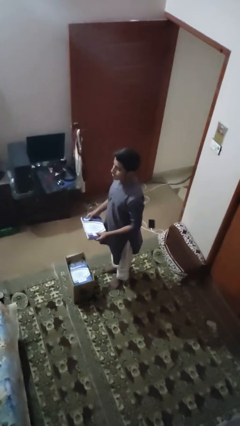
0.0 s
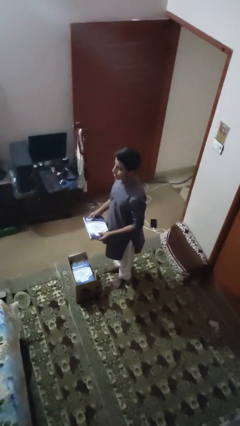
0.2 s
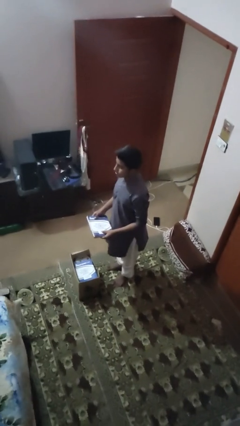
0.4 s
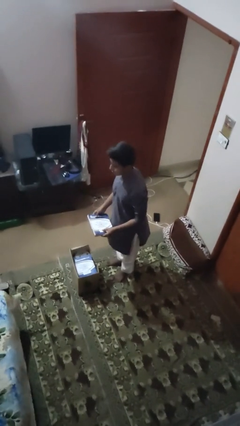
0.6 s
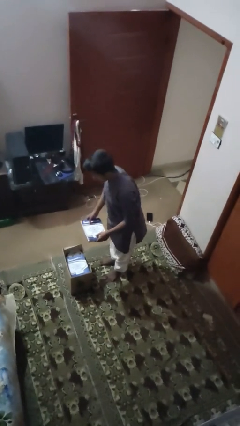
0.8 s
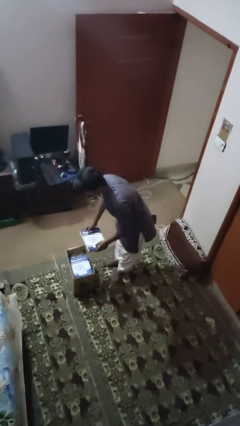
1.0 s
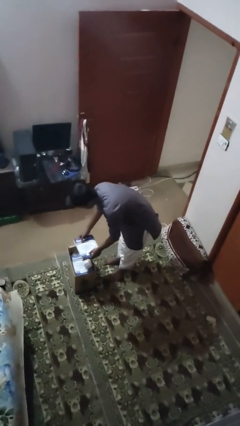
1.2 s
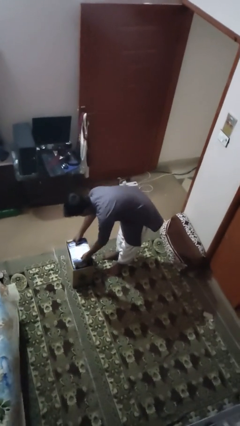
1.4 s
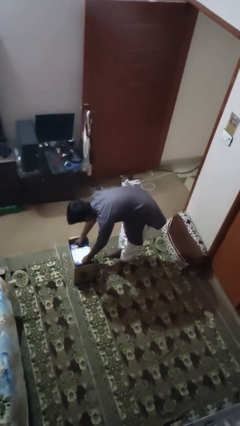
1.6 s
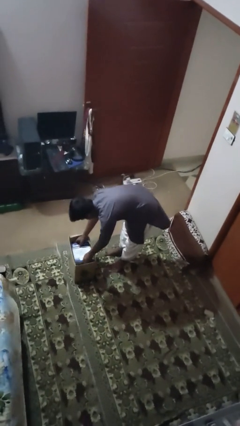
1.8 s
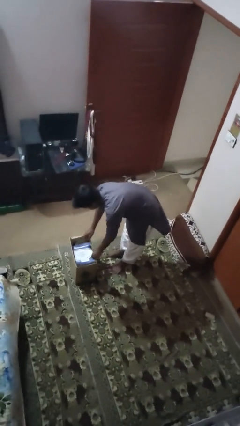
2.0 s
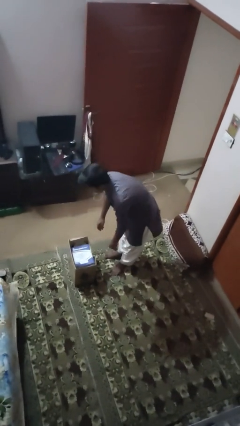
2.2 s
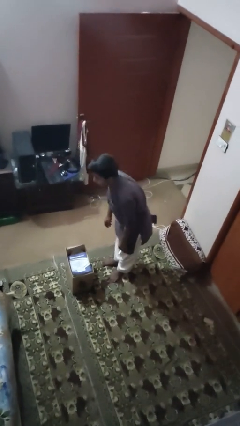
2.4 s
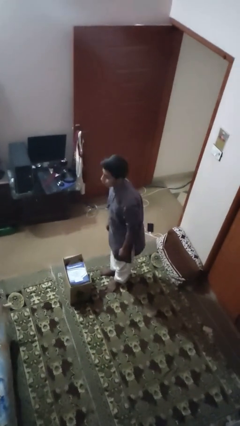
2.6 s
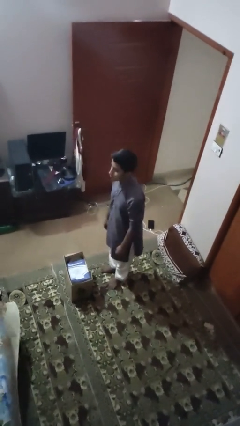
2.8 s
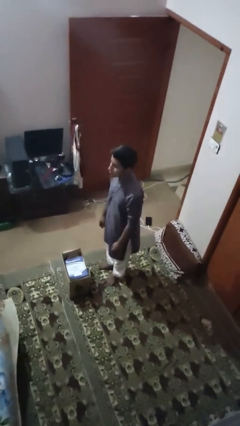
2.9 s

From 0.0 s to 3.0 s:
person puts object into box

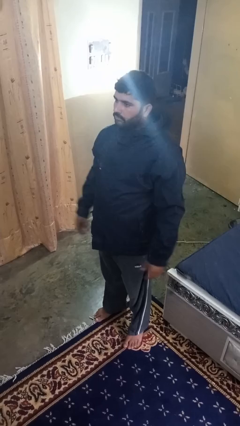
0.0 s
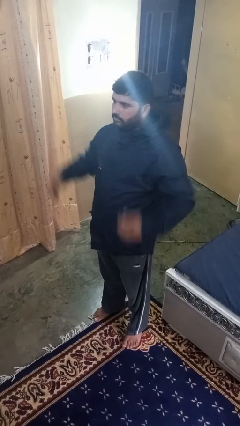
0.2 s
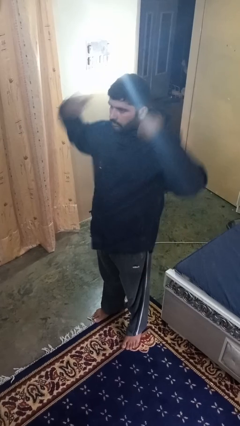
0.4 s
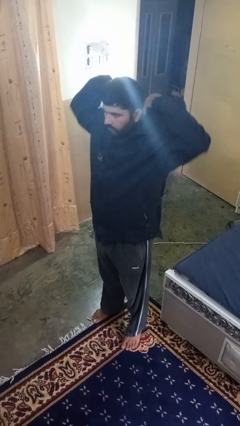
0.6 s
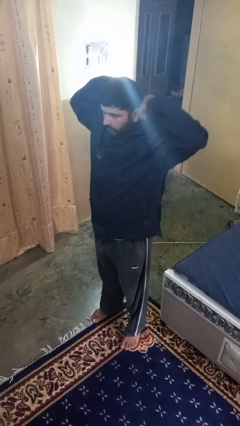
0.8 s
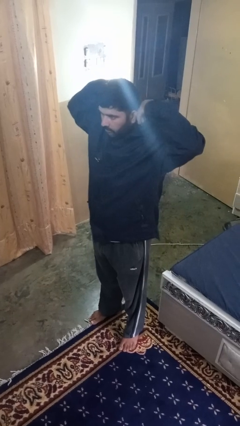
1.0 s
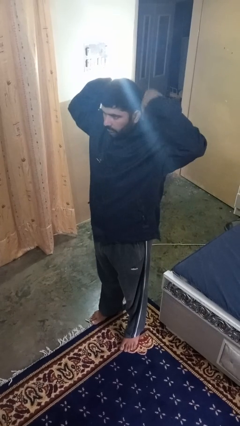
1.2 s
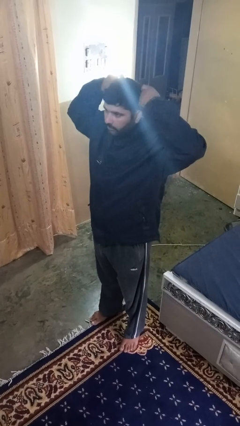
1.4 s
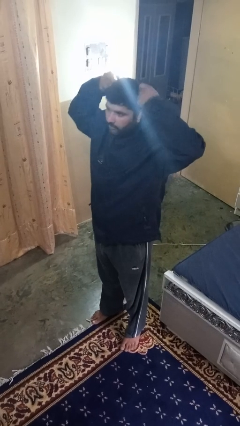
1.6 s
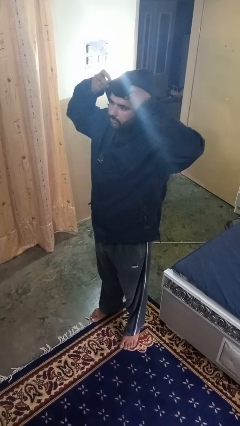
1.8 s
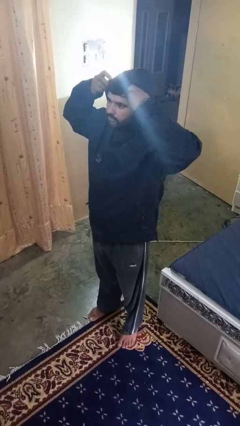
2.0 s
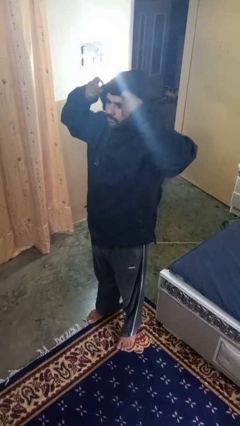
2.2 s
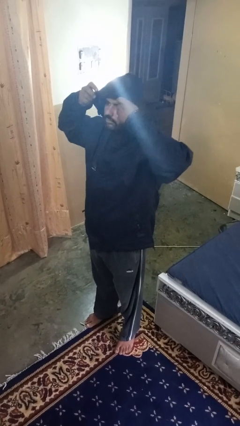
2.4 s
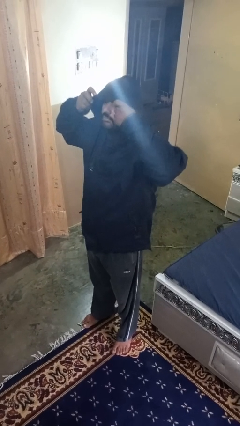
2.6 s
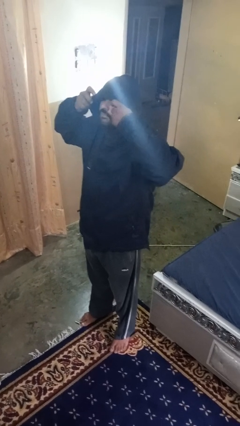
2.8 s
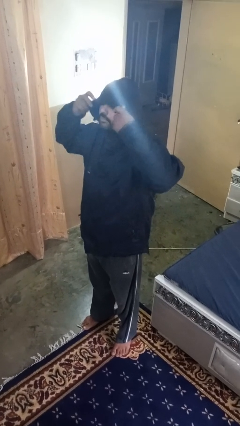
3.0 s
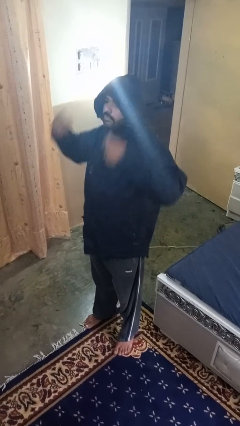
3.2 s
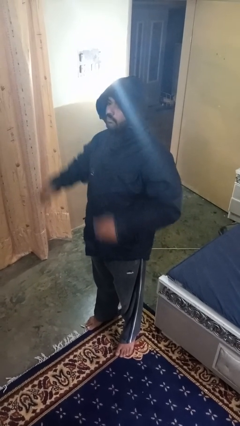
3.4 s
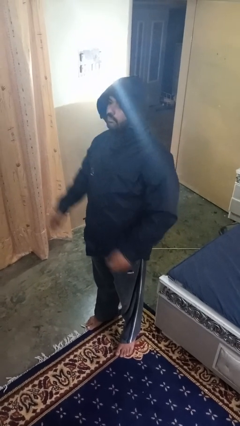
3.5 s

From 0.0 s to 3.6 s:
person puts on hoodie

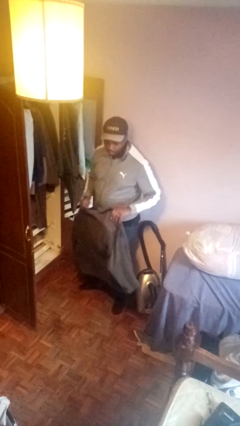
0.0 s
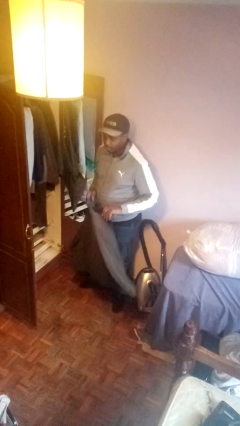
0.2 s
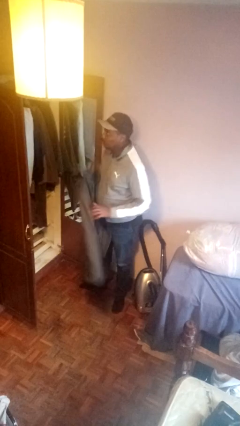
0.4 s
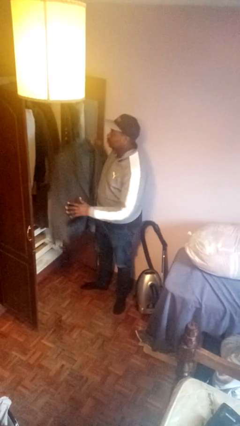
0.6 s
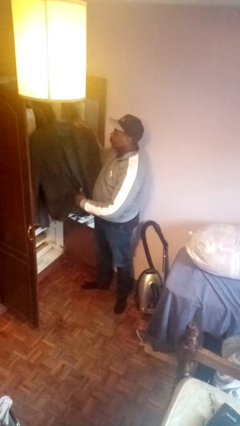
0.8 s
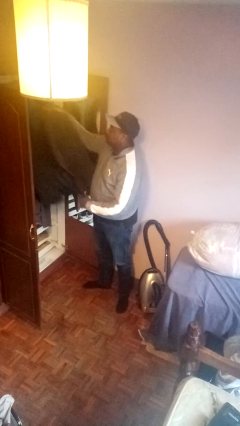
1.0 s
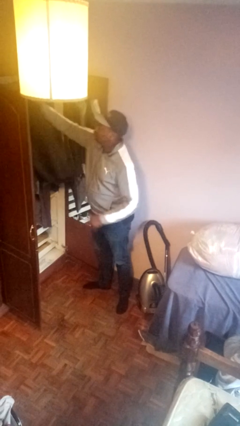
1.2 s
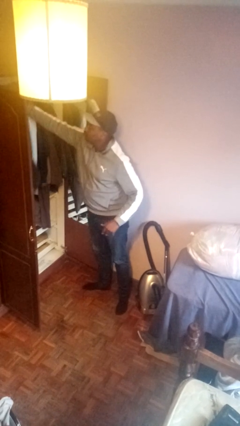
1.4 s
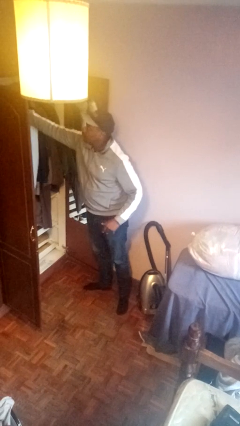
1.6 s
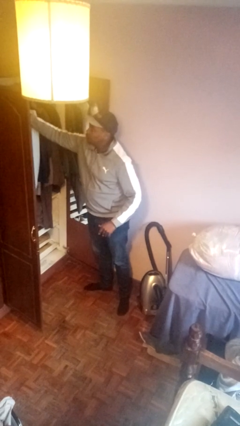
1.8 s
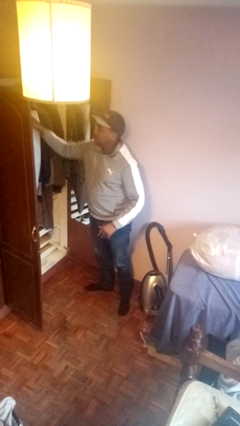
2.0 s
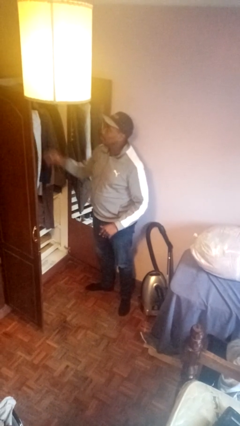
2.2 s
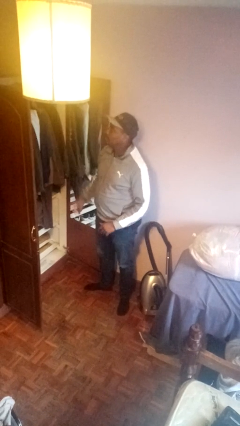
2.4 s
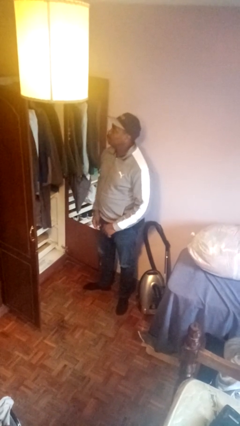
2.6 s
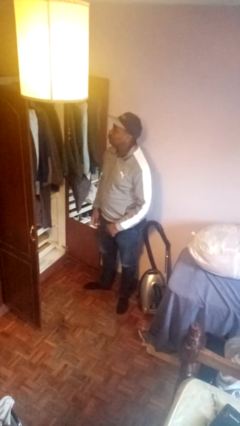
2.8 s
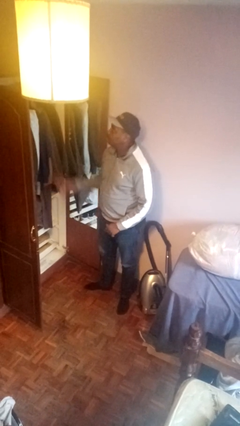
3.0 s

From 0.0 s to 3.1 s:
person puts clothes into closet

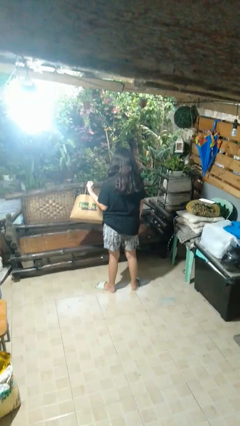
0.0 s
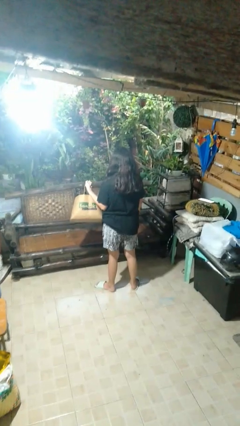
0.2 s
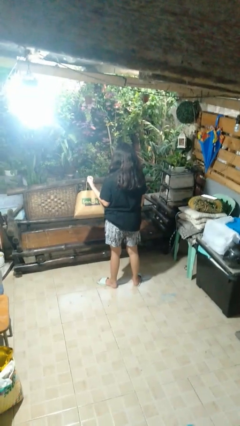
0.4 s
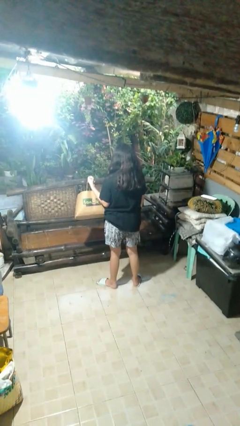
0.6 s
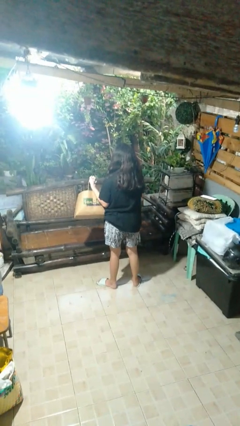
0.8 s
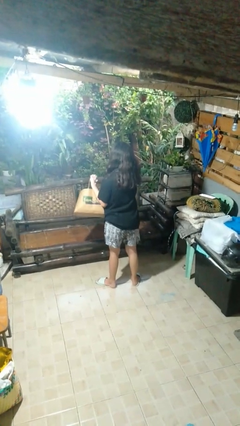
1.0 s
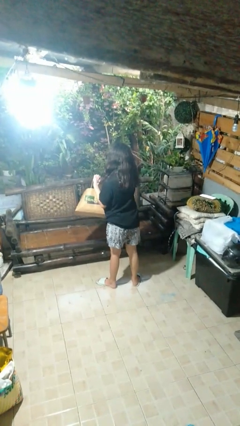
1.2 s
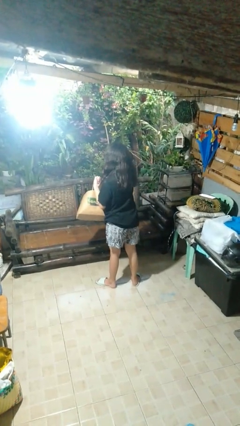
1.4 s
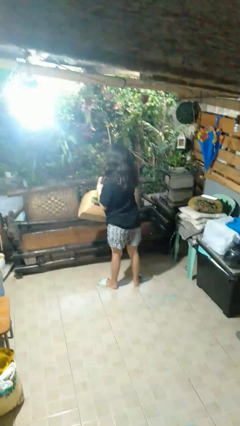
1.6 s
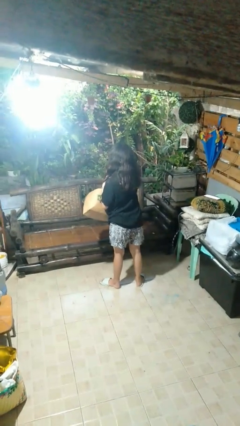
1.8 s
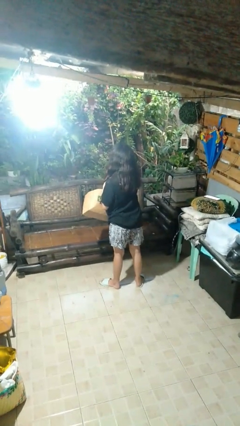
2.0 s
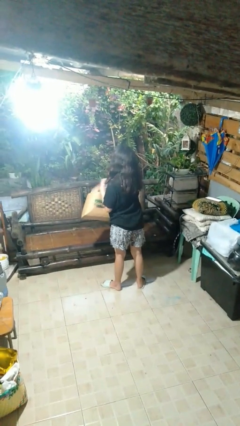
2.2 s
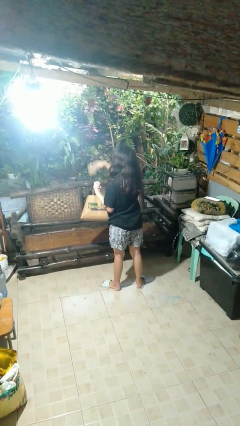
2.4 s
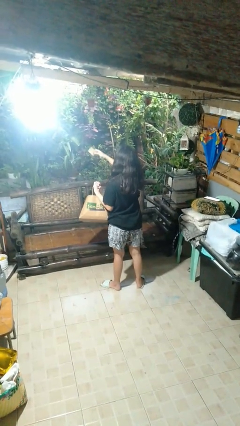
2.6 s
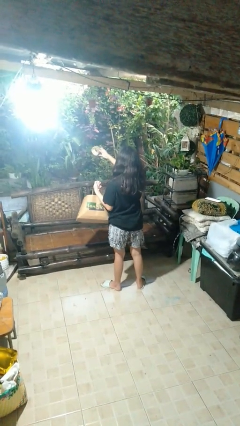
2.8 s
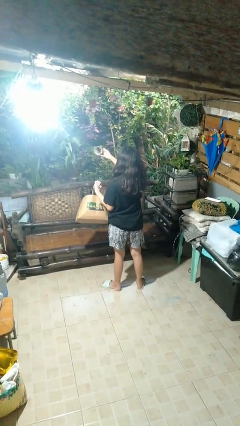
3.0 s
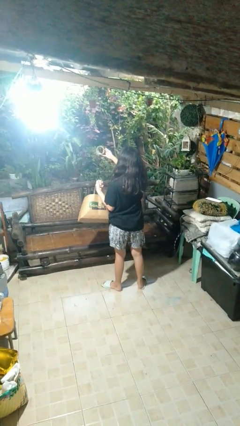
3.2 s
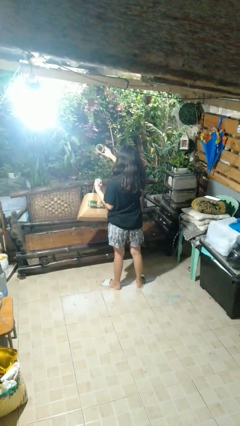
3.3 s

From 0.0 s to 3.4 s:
person takes object from bag

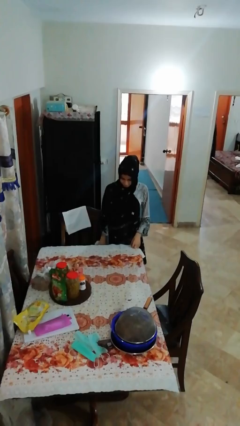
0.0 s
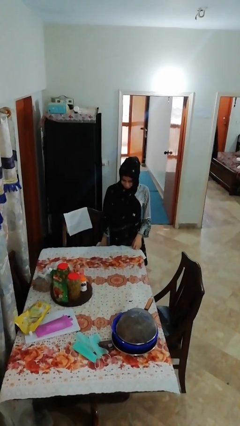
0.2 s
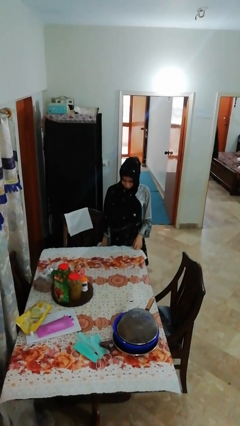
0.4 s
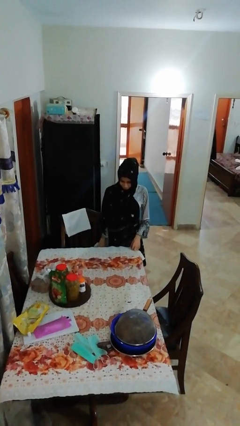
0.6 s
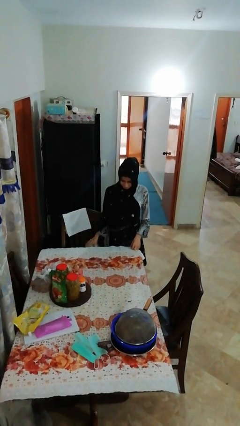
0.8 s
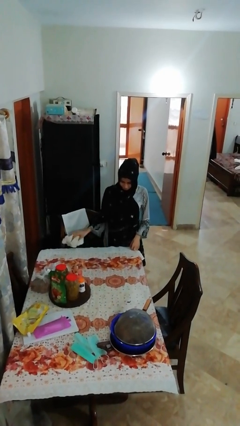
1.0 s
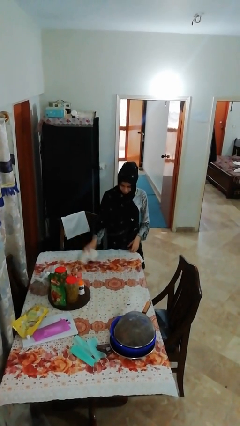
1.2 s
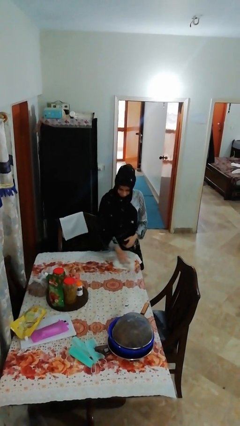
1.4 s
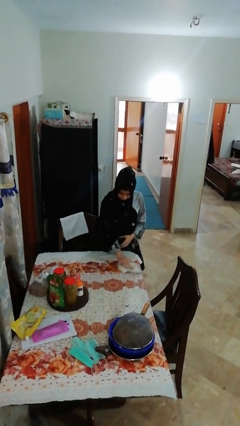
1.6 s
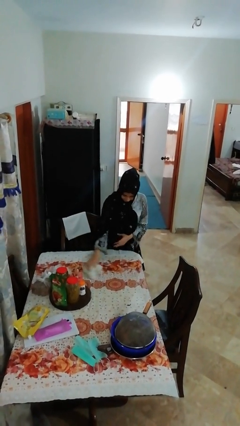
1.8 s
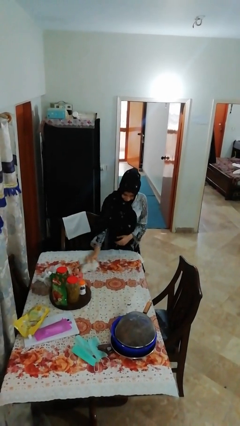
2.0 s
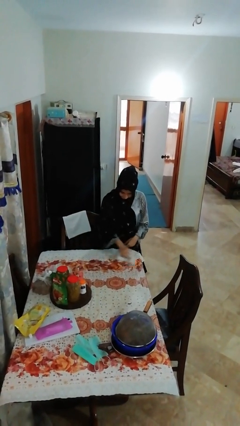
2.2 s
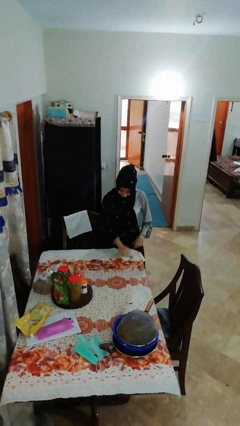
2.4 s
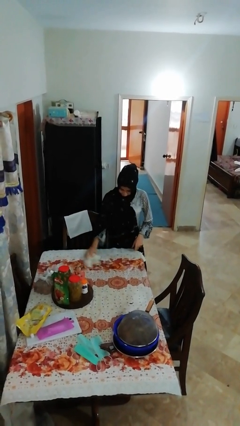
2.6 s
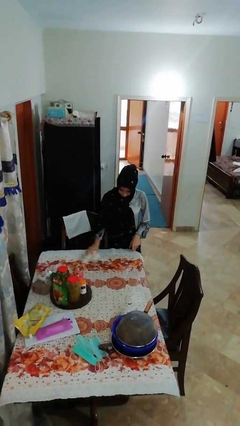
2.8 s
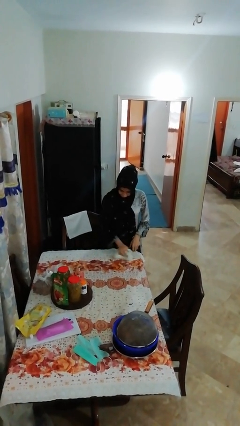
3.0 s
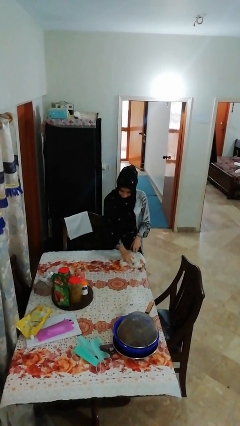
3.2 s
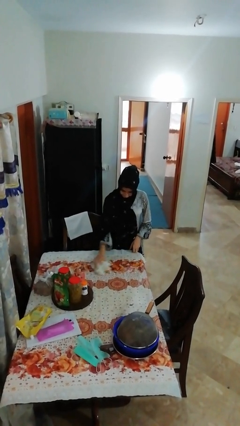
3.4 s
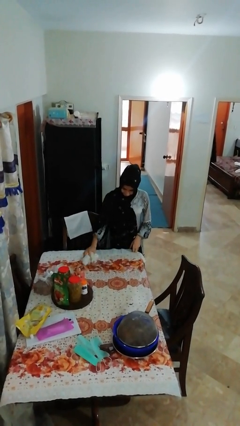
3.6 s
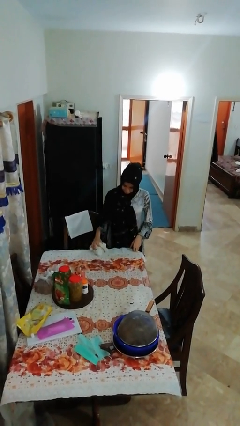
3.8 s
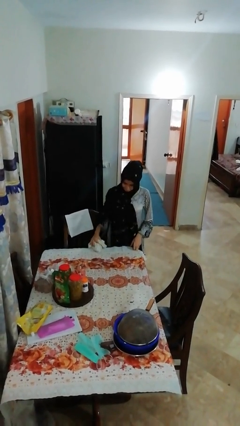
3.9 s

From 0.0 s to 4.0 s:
person cleans table with rag

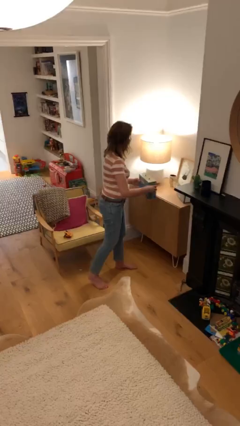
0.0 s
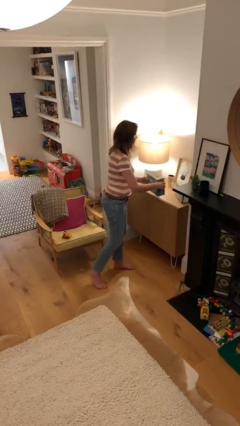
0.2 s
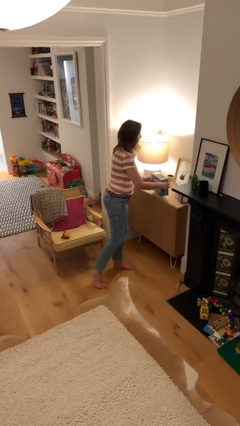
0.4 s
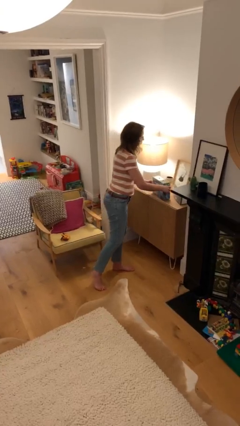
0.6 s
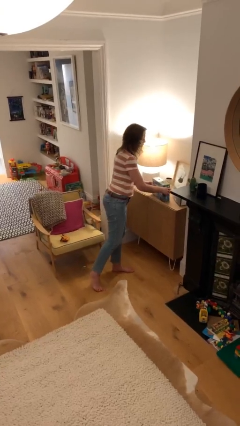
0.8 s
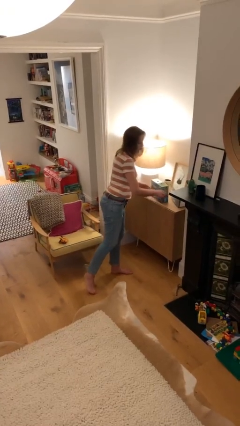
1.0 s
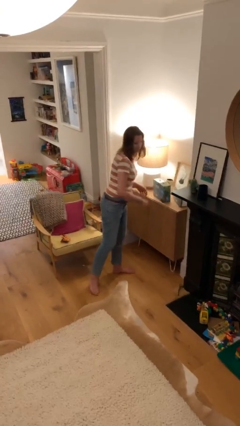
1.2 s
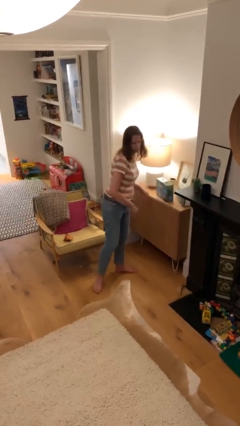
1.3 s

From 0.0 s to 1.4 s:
person puts down object on table
